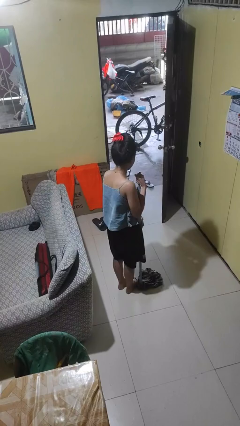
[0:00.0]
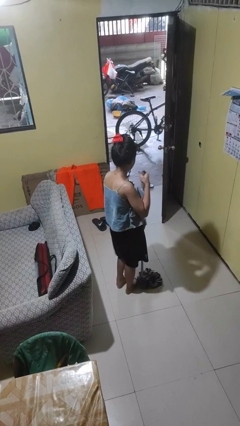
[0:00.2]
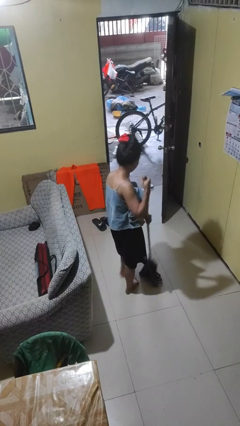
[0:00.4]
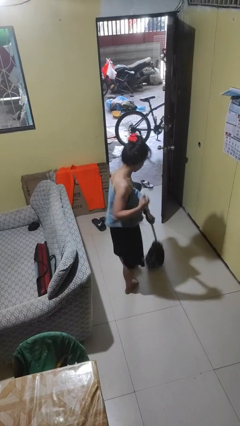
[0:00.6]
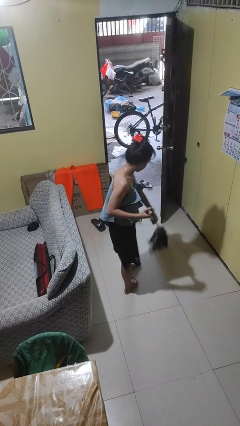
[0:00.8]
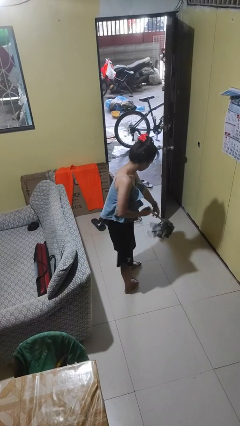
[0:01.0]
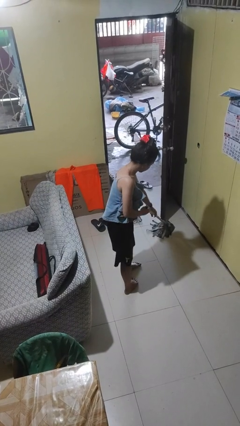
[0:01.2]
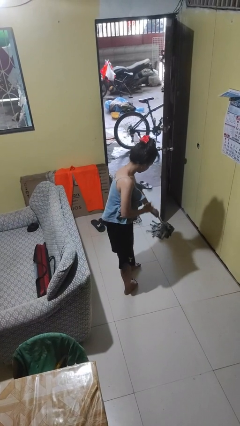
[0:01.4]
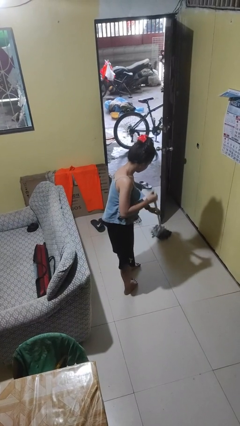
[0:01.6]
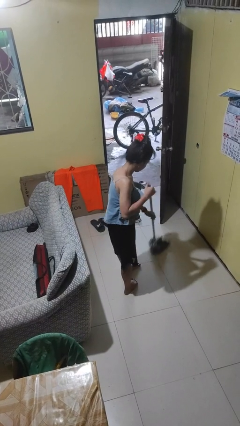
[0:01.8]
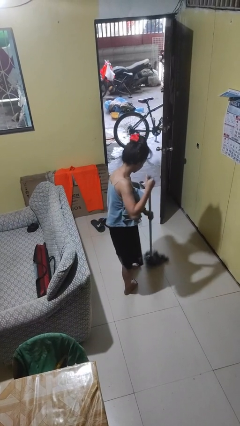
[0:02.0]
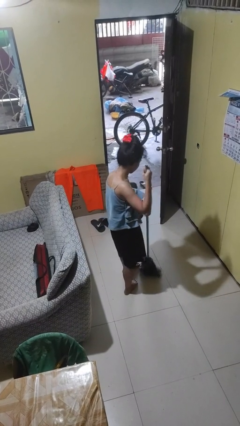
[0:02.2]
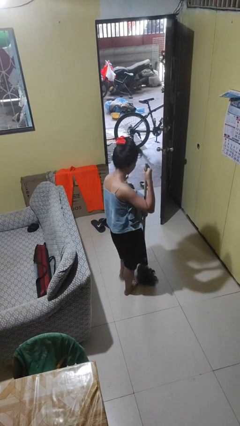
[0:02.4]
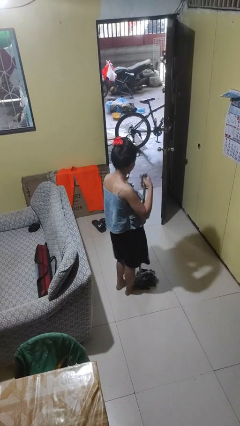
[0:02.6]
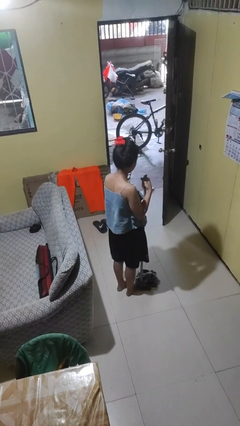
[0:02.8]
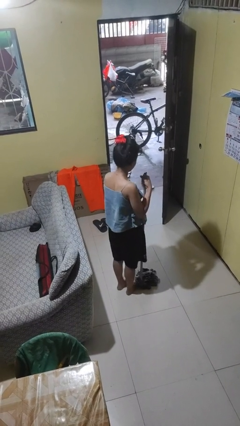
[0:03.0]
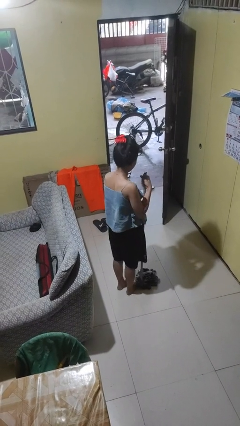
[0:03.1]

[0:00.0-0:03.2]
person mops

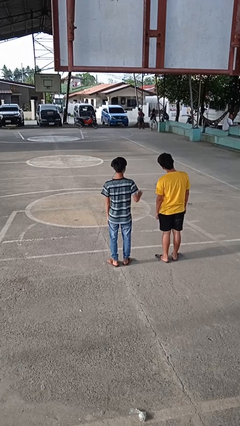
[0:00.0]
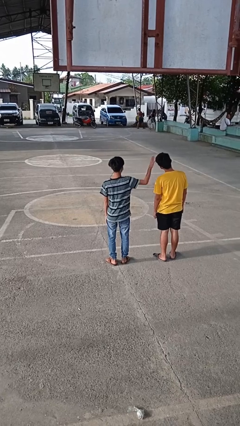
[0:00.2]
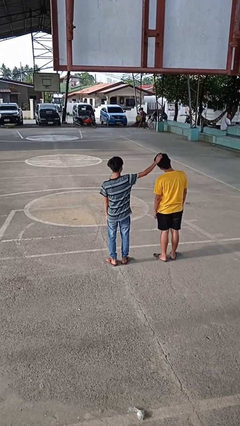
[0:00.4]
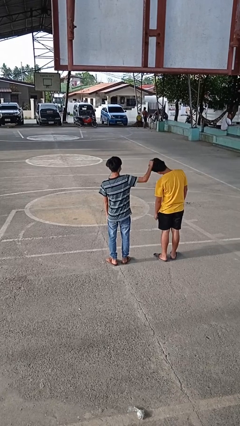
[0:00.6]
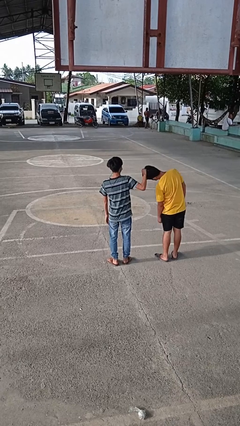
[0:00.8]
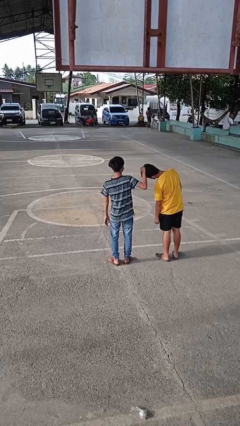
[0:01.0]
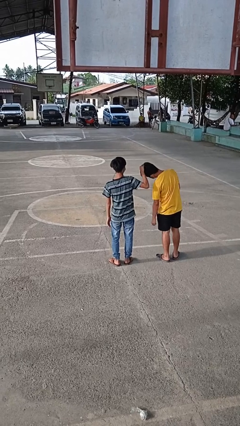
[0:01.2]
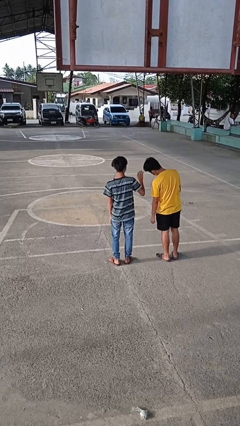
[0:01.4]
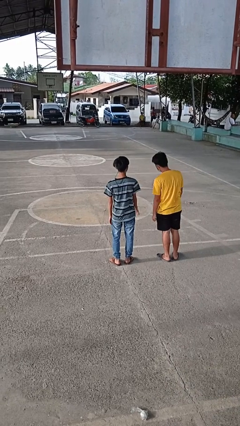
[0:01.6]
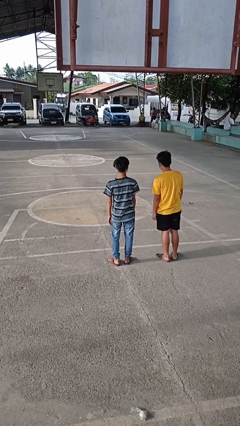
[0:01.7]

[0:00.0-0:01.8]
person grabs person by hair

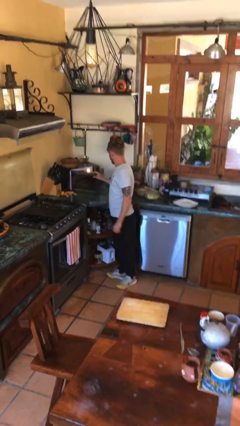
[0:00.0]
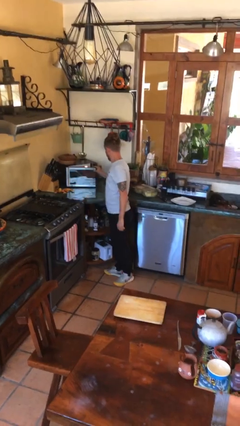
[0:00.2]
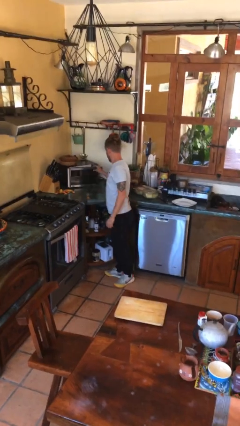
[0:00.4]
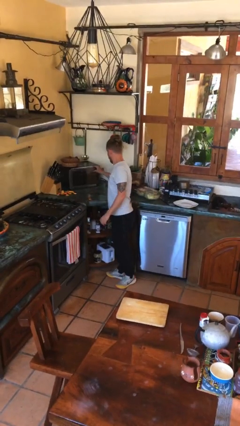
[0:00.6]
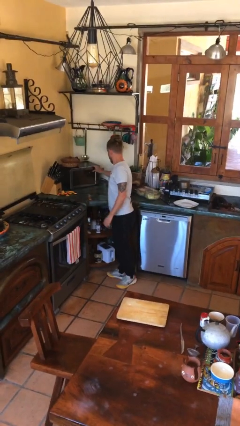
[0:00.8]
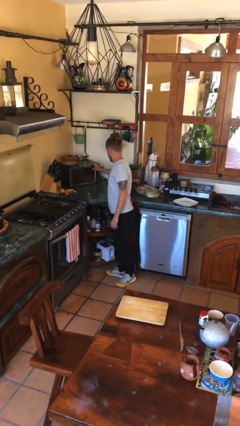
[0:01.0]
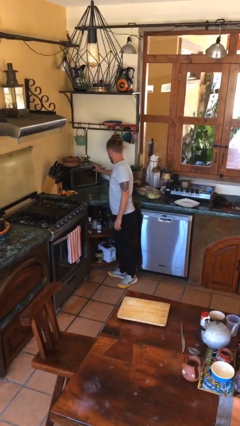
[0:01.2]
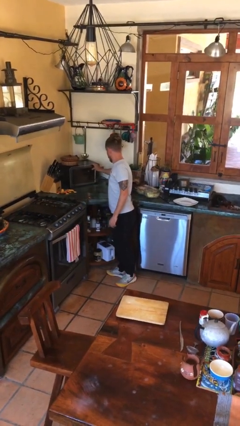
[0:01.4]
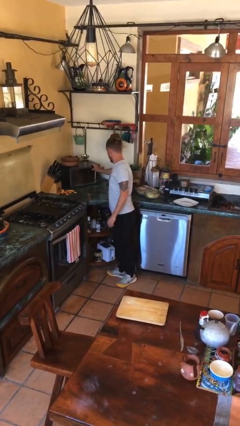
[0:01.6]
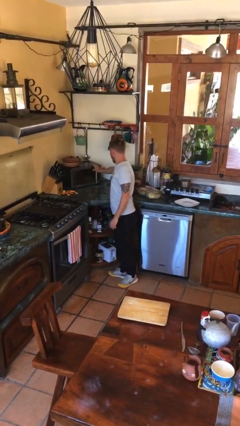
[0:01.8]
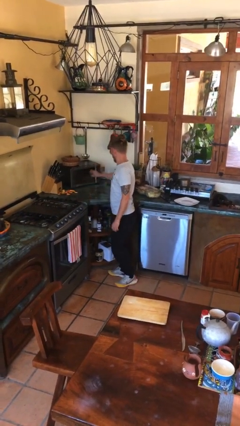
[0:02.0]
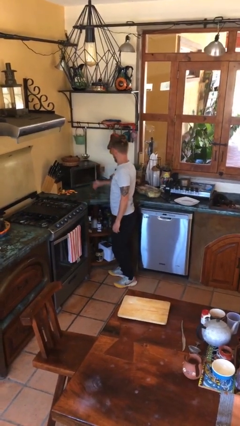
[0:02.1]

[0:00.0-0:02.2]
person closes microwave

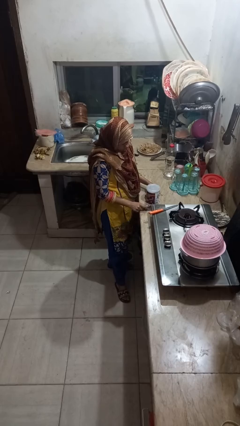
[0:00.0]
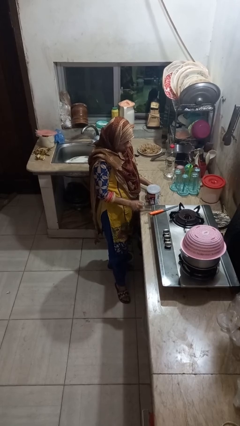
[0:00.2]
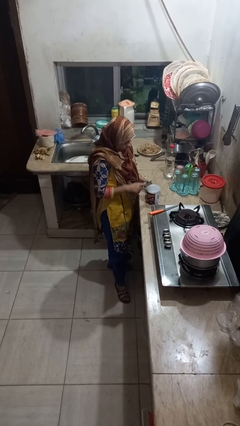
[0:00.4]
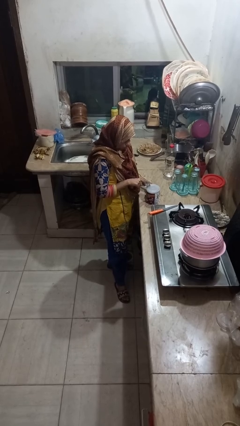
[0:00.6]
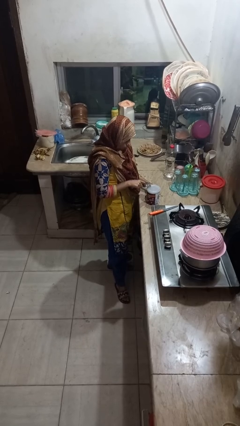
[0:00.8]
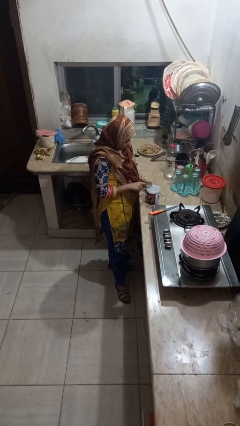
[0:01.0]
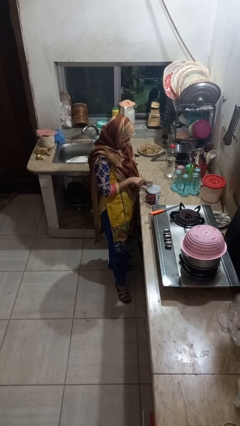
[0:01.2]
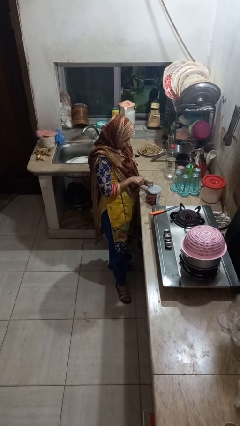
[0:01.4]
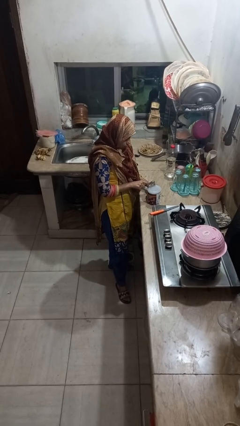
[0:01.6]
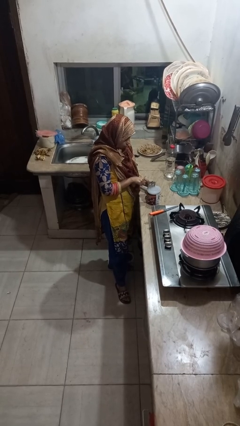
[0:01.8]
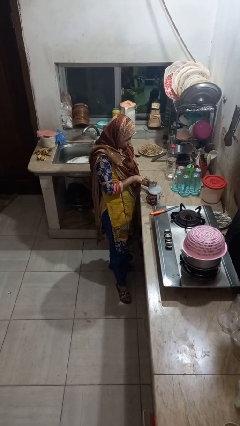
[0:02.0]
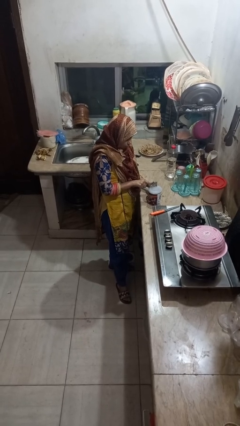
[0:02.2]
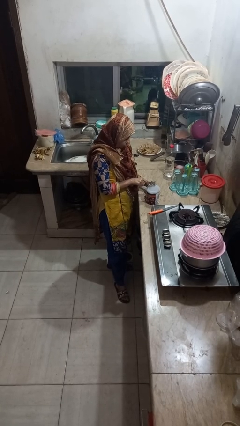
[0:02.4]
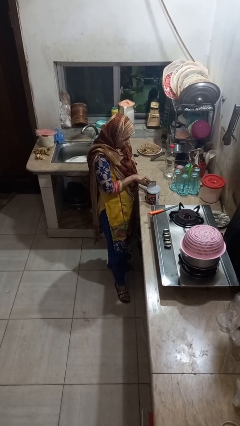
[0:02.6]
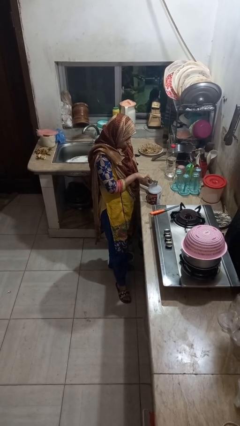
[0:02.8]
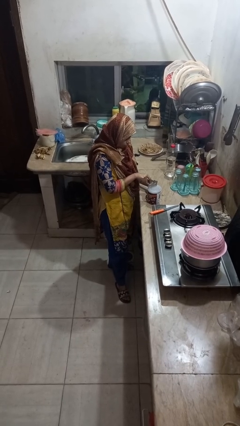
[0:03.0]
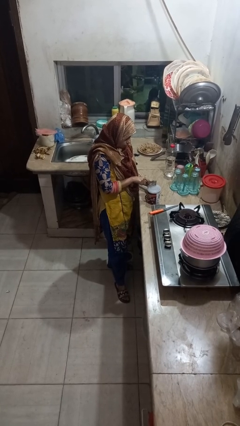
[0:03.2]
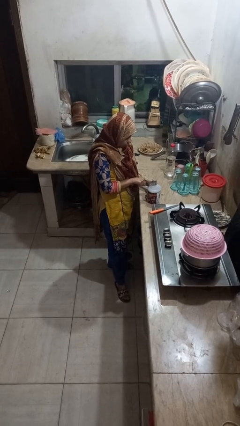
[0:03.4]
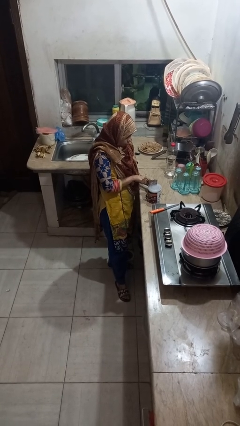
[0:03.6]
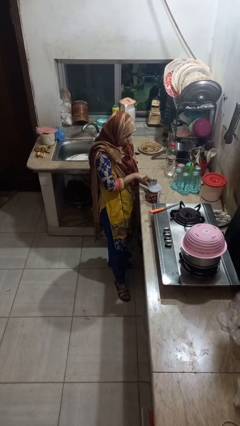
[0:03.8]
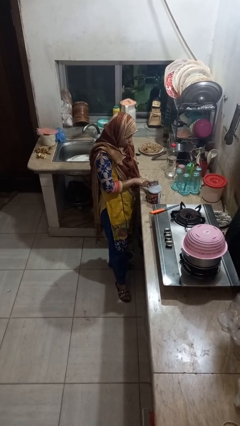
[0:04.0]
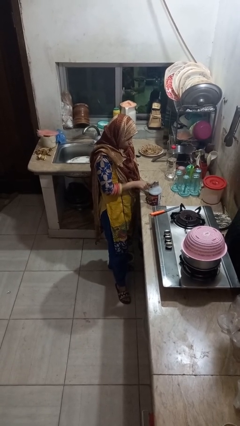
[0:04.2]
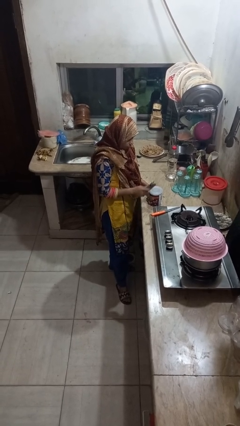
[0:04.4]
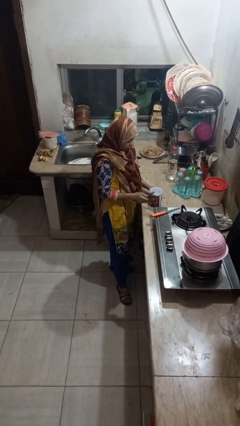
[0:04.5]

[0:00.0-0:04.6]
person opens can with can opener

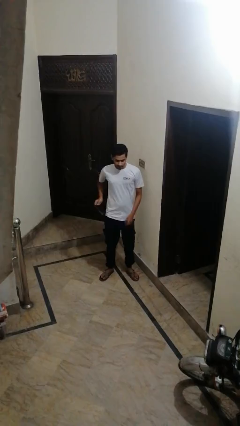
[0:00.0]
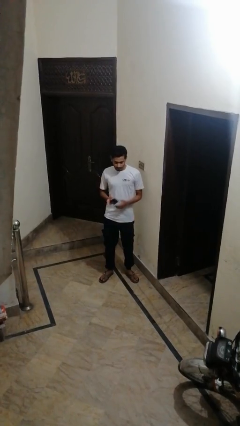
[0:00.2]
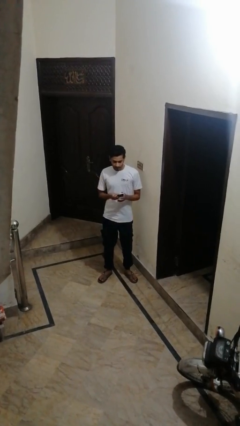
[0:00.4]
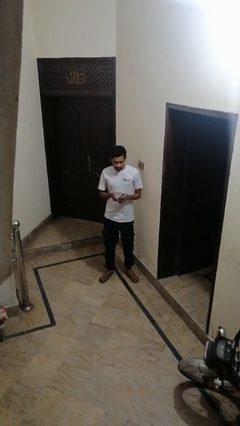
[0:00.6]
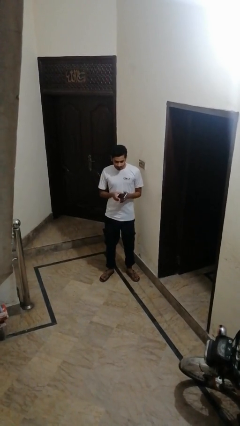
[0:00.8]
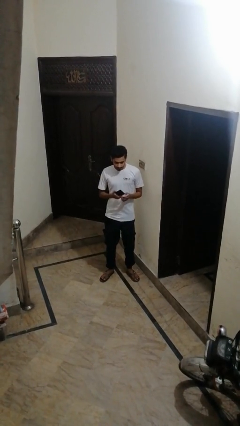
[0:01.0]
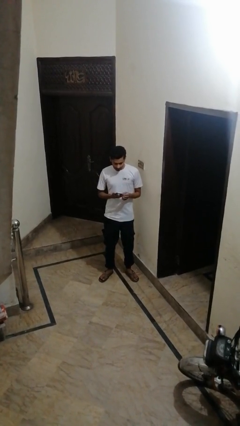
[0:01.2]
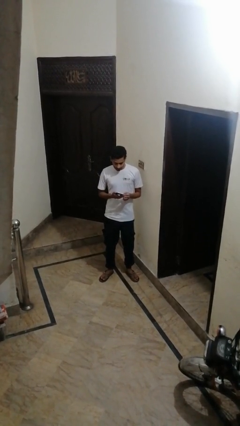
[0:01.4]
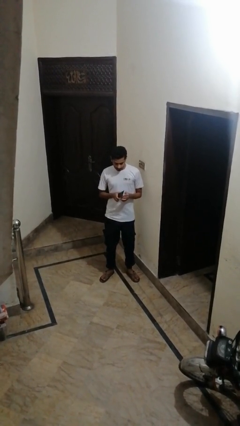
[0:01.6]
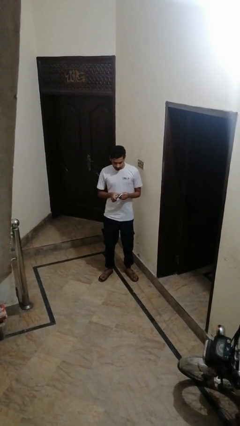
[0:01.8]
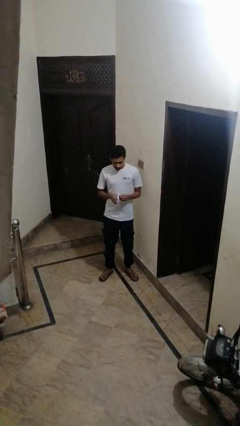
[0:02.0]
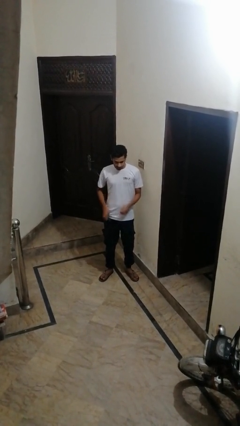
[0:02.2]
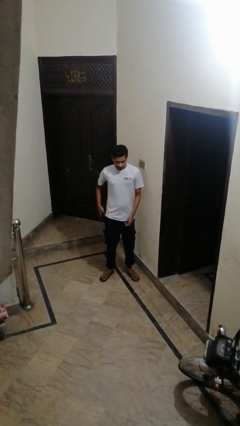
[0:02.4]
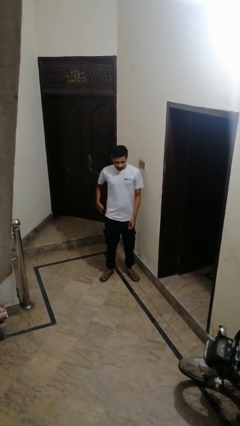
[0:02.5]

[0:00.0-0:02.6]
person shoves person

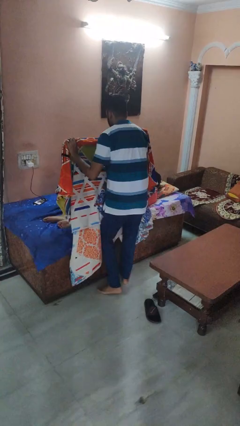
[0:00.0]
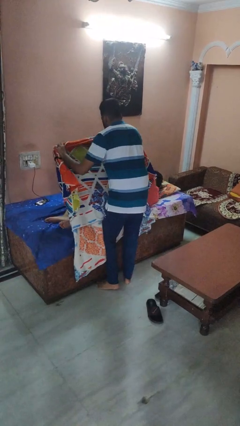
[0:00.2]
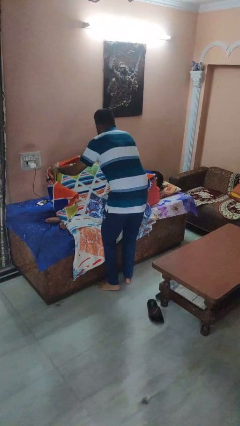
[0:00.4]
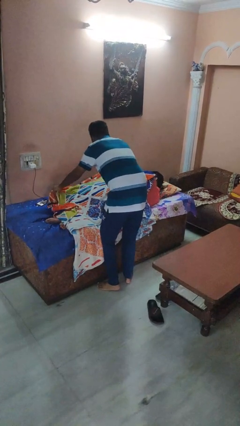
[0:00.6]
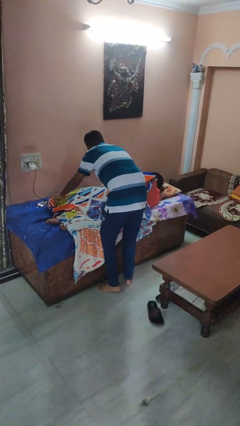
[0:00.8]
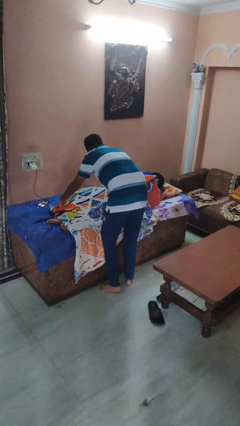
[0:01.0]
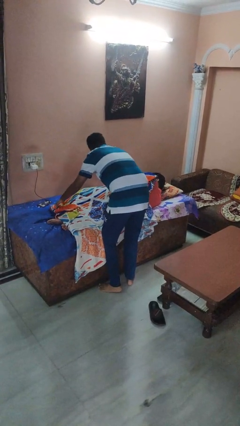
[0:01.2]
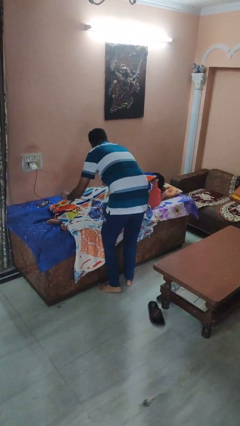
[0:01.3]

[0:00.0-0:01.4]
person covers friend with blanket

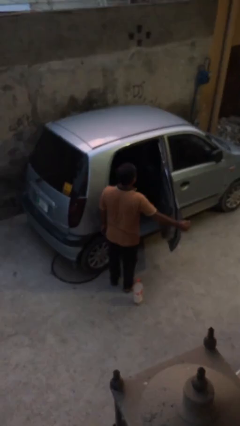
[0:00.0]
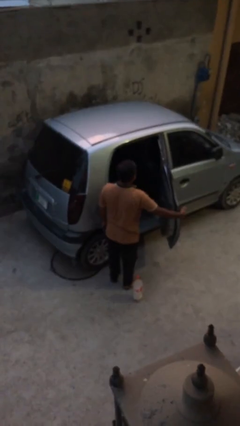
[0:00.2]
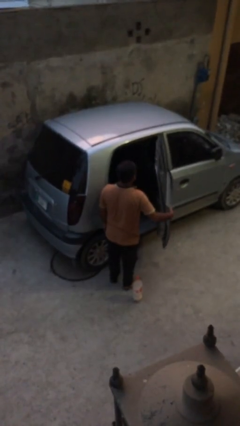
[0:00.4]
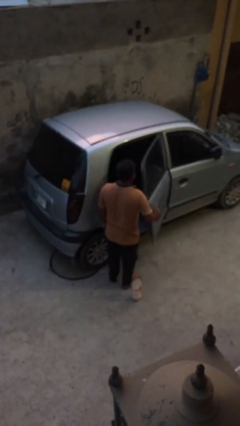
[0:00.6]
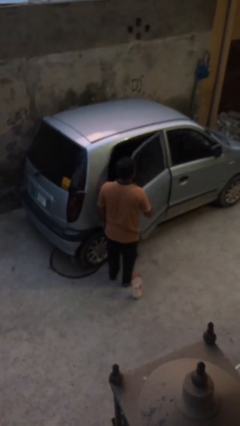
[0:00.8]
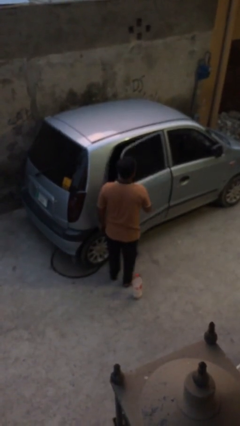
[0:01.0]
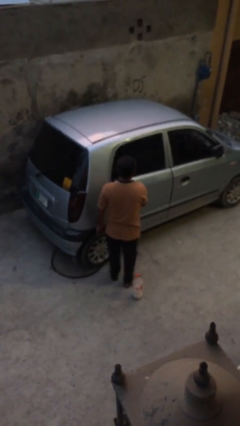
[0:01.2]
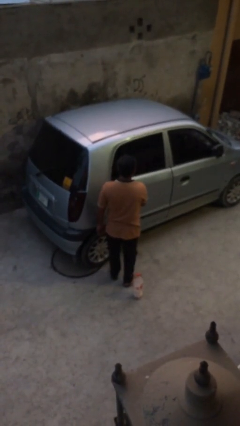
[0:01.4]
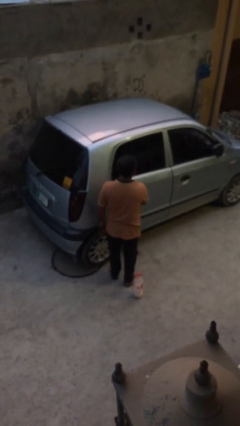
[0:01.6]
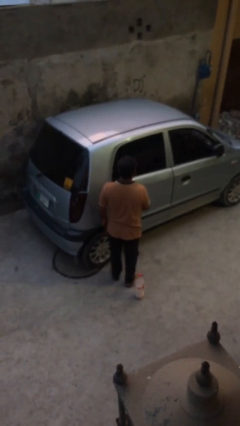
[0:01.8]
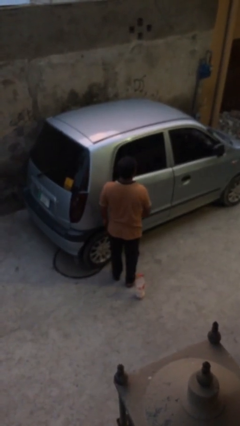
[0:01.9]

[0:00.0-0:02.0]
person closes car door
